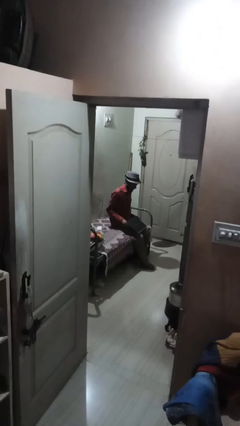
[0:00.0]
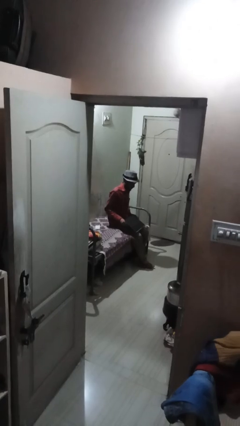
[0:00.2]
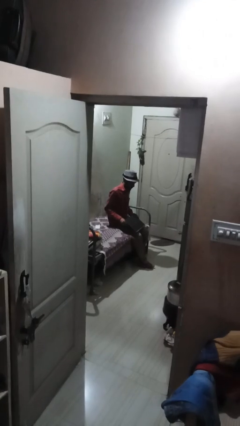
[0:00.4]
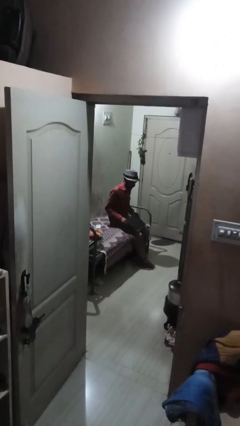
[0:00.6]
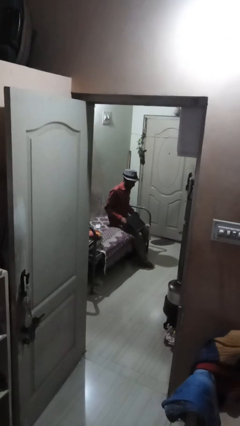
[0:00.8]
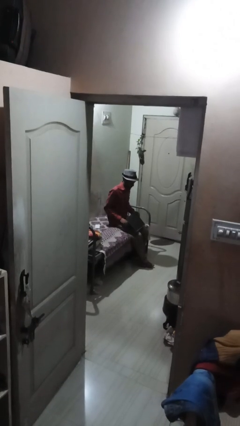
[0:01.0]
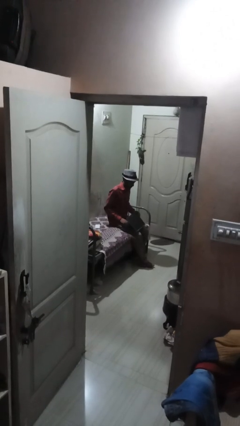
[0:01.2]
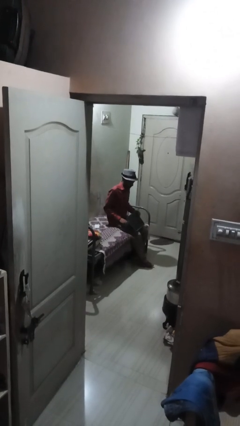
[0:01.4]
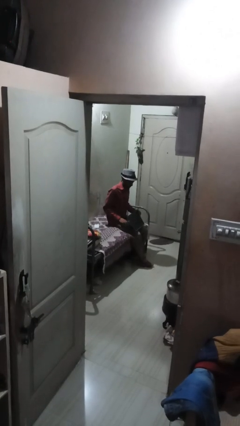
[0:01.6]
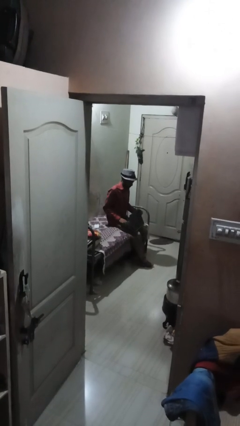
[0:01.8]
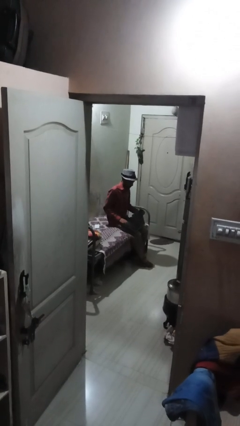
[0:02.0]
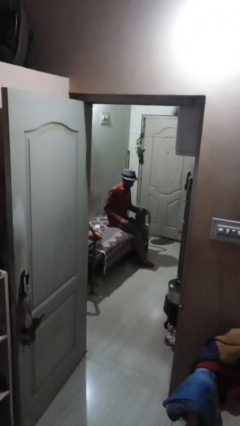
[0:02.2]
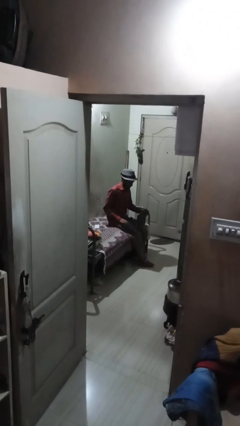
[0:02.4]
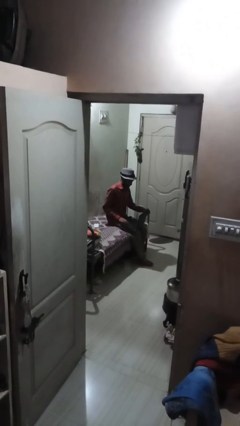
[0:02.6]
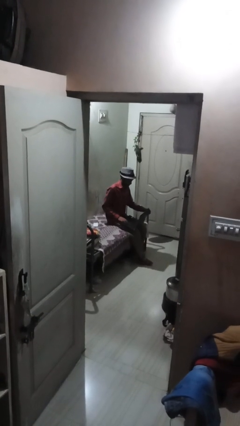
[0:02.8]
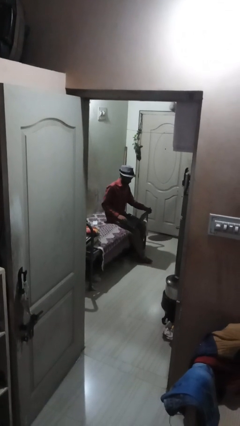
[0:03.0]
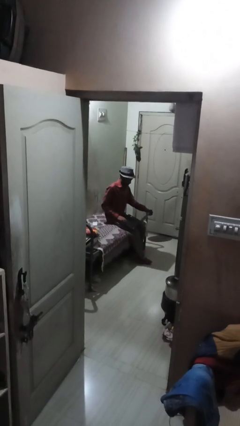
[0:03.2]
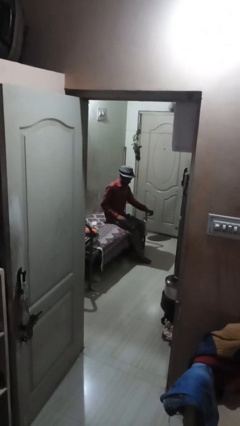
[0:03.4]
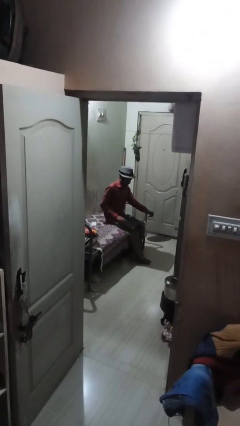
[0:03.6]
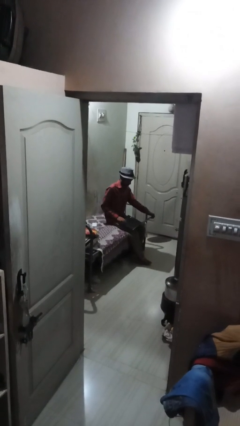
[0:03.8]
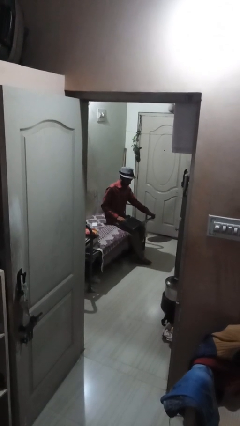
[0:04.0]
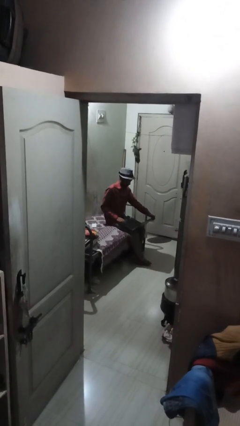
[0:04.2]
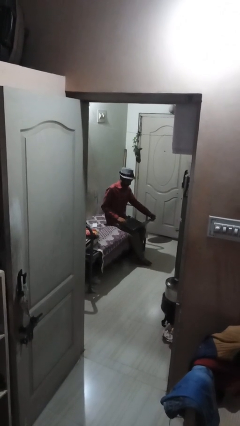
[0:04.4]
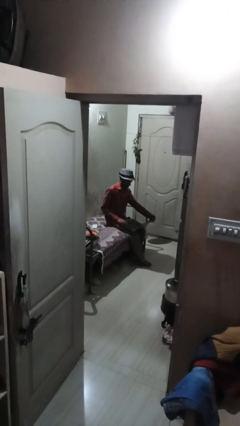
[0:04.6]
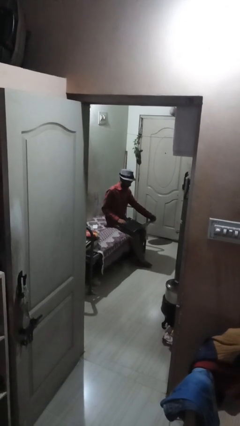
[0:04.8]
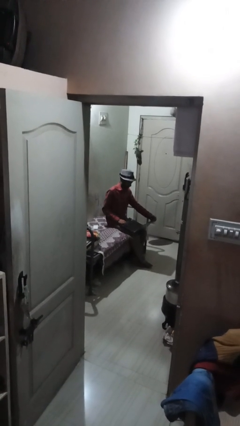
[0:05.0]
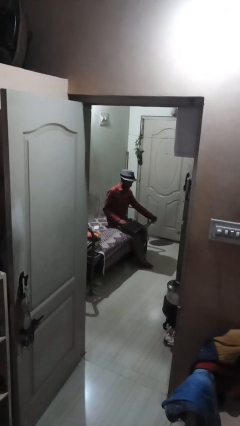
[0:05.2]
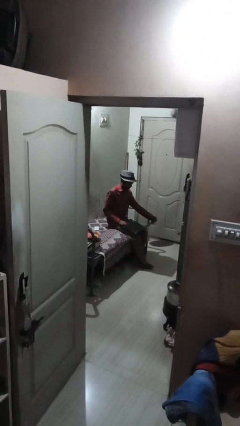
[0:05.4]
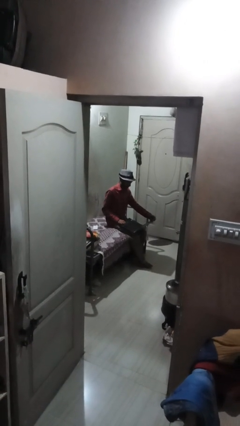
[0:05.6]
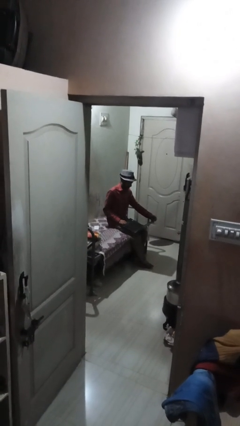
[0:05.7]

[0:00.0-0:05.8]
person opens laptop

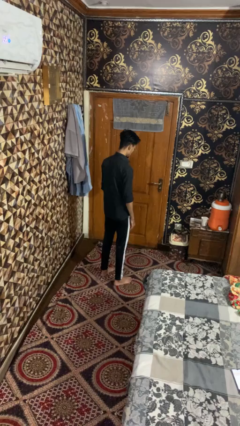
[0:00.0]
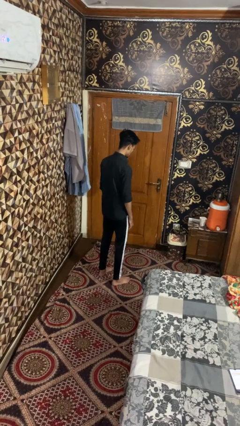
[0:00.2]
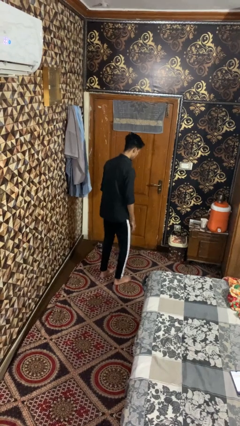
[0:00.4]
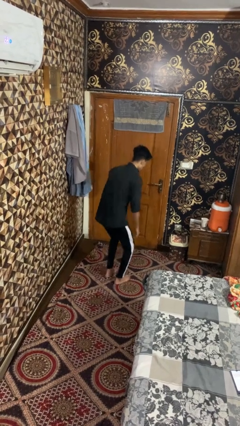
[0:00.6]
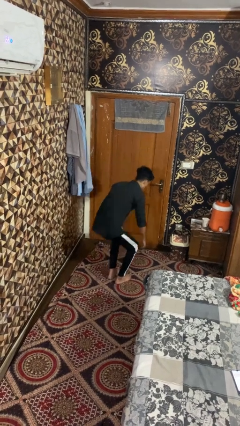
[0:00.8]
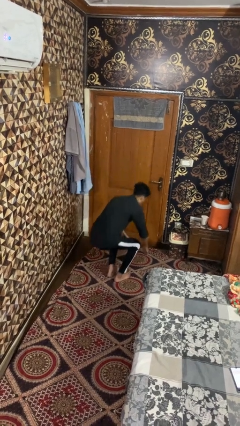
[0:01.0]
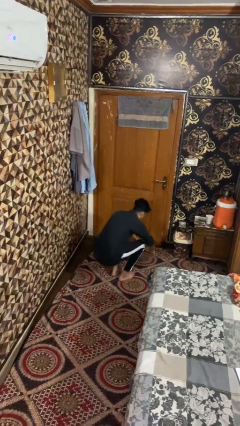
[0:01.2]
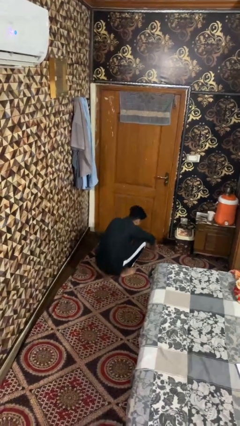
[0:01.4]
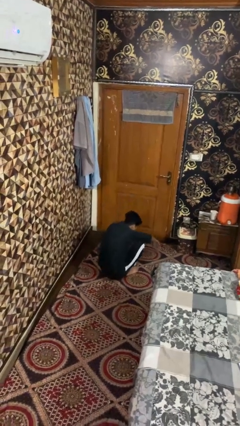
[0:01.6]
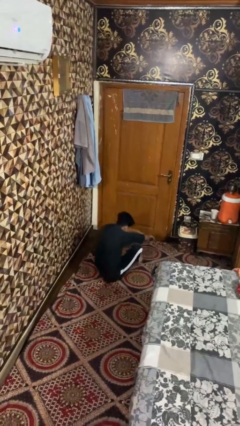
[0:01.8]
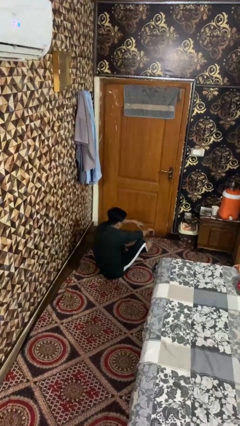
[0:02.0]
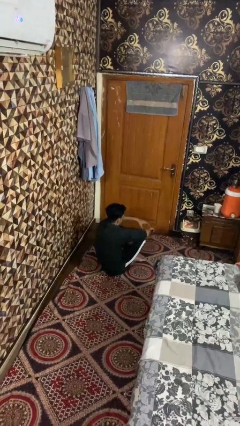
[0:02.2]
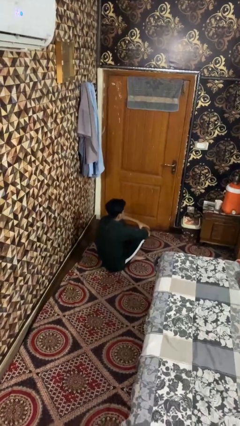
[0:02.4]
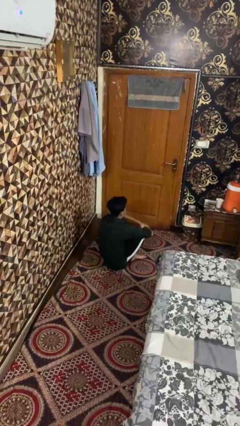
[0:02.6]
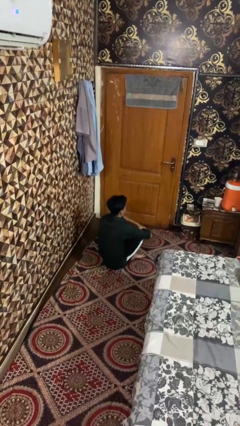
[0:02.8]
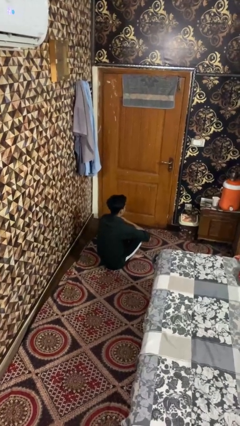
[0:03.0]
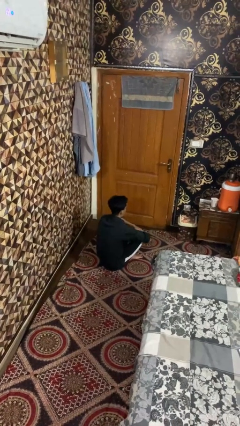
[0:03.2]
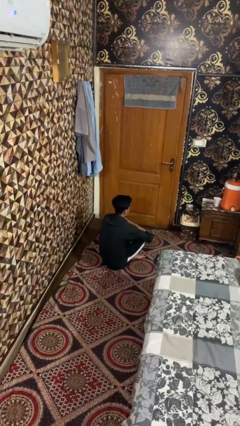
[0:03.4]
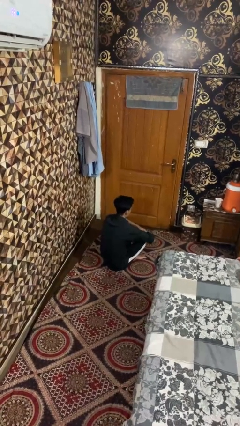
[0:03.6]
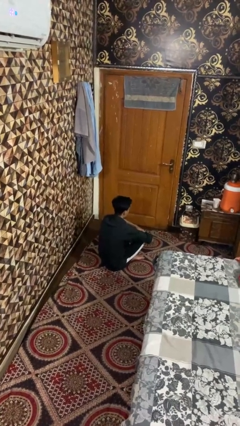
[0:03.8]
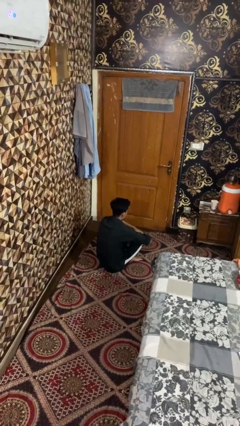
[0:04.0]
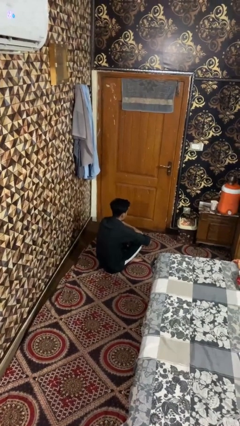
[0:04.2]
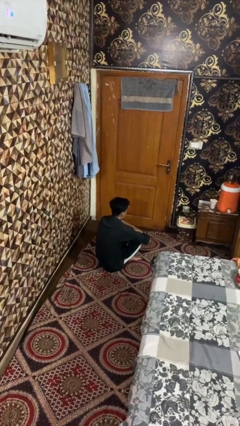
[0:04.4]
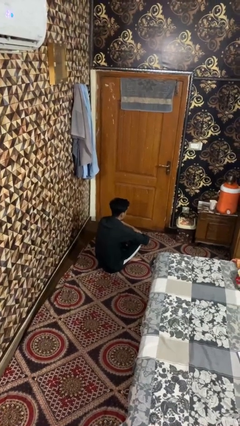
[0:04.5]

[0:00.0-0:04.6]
person sits crisscross

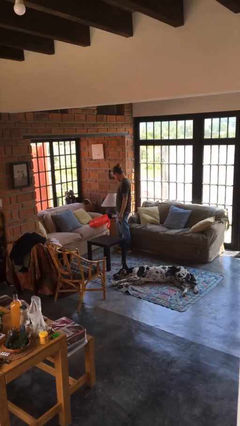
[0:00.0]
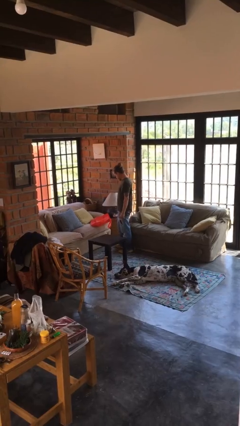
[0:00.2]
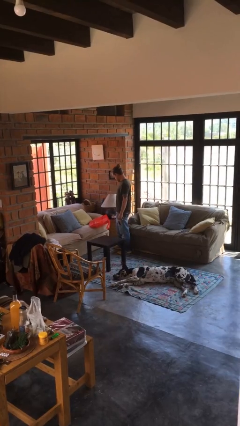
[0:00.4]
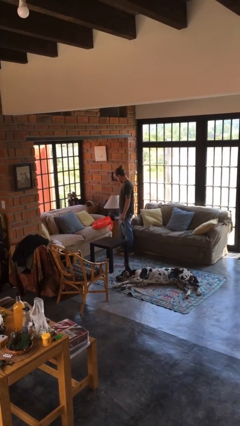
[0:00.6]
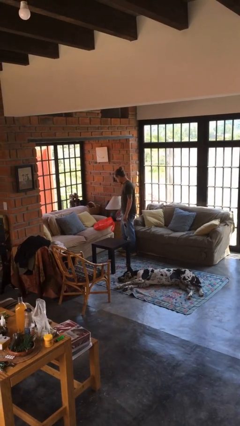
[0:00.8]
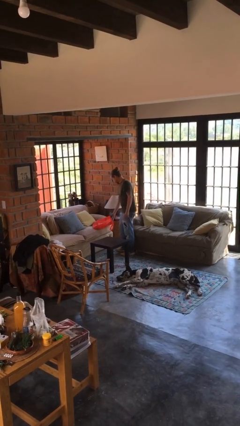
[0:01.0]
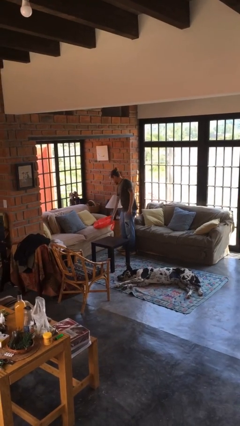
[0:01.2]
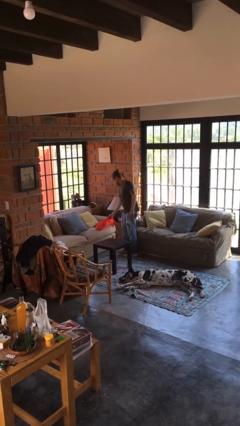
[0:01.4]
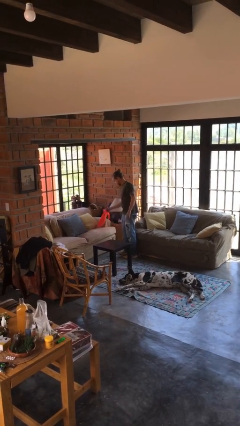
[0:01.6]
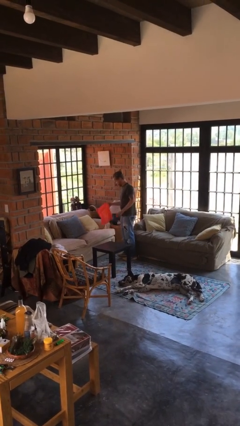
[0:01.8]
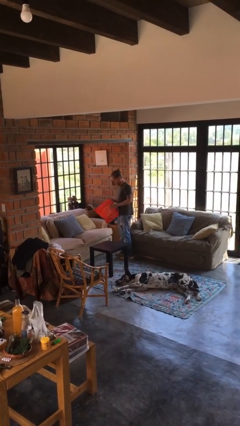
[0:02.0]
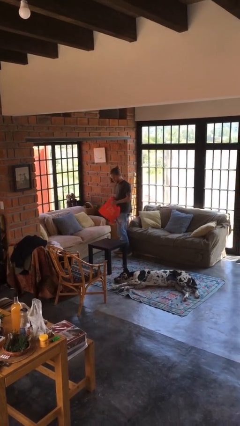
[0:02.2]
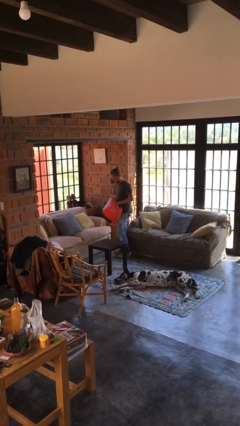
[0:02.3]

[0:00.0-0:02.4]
person picks up object from couch

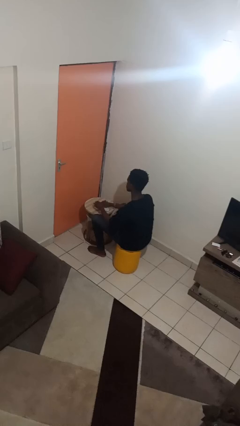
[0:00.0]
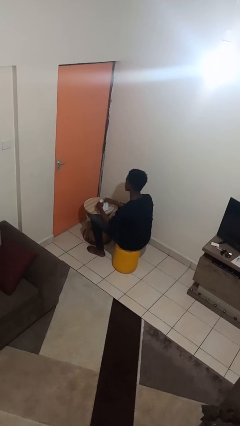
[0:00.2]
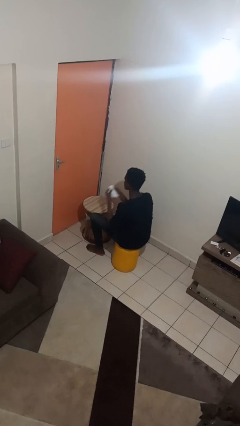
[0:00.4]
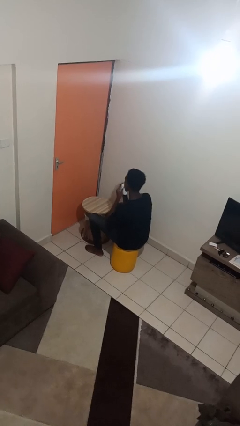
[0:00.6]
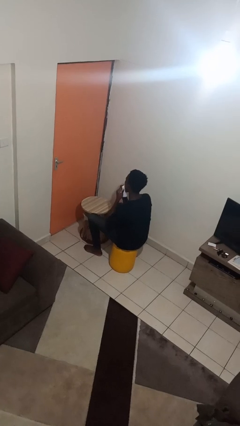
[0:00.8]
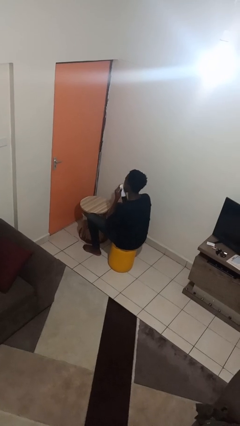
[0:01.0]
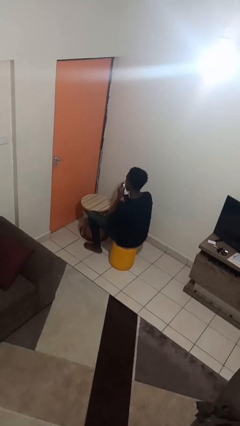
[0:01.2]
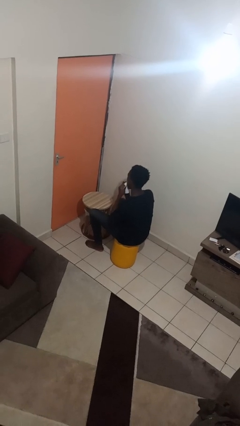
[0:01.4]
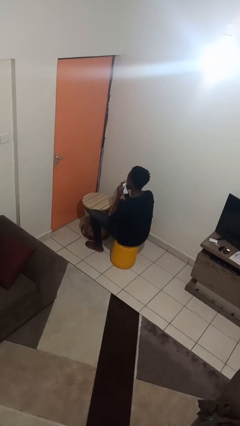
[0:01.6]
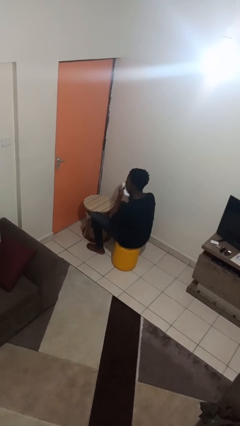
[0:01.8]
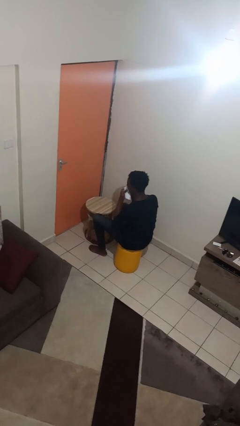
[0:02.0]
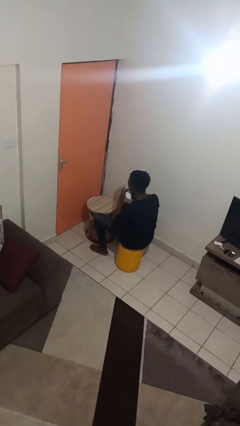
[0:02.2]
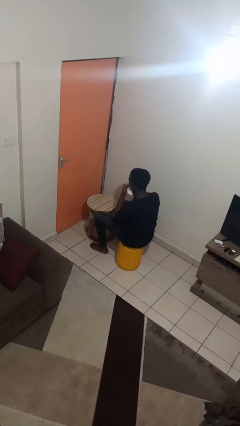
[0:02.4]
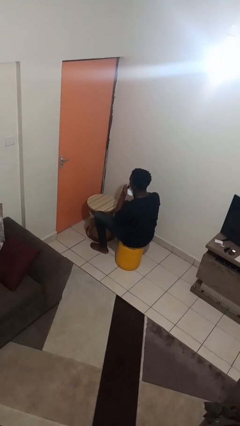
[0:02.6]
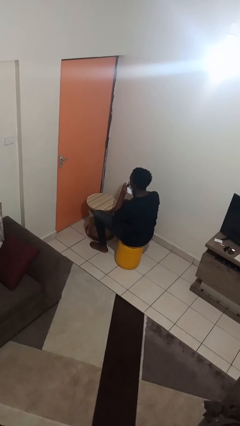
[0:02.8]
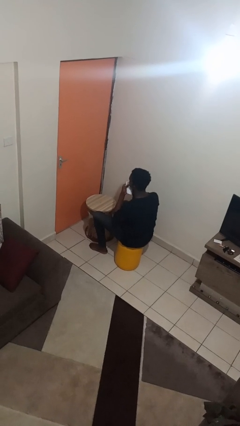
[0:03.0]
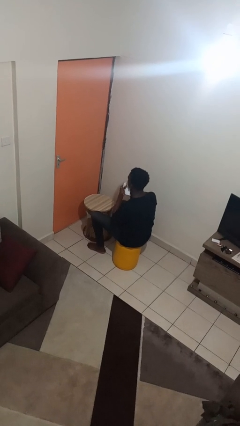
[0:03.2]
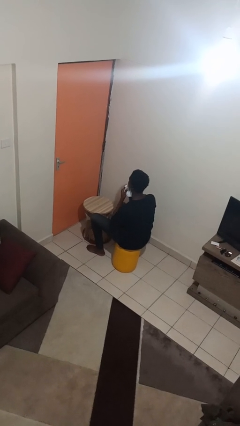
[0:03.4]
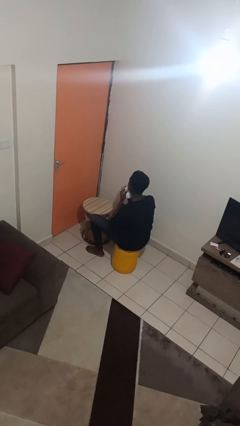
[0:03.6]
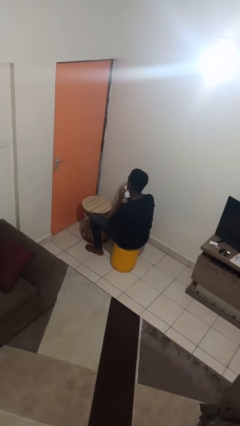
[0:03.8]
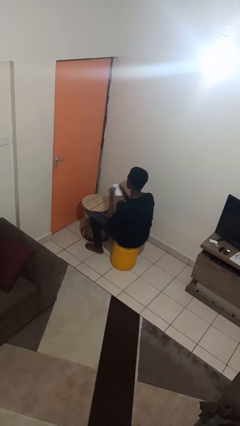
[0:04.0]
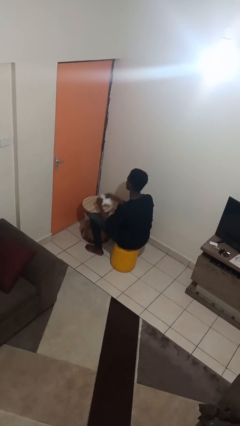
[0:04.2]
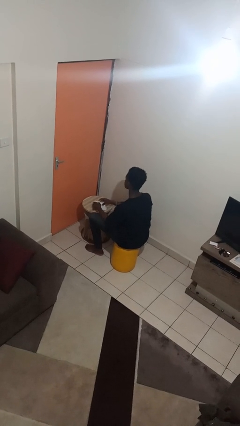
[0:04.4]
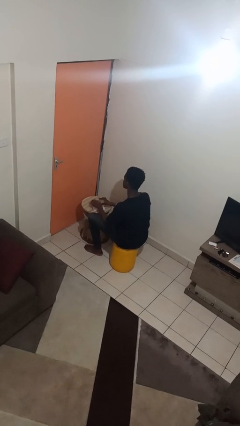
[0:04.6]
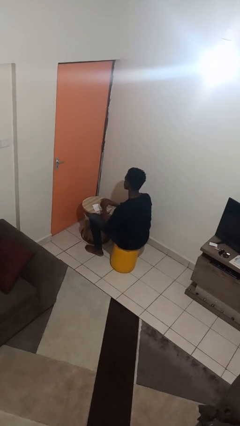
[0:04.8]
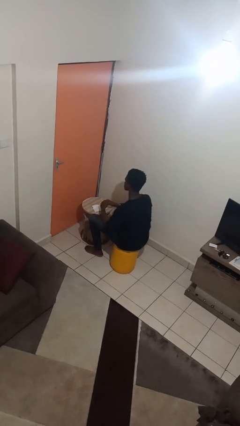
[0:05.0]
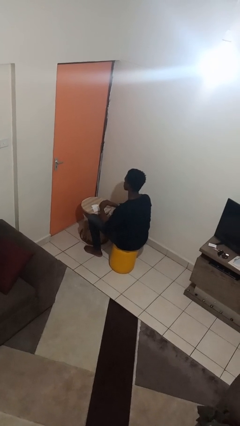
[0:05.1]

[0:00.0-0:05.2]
person wipes mouth with napkin
